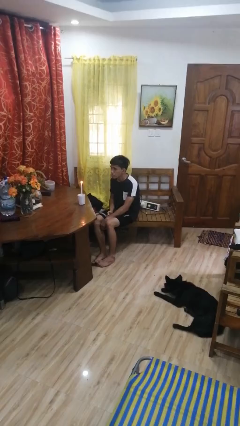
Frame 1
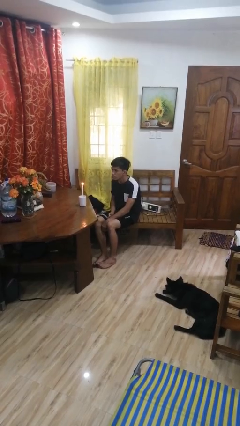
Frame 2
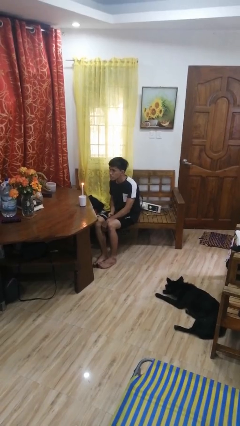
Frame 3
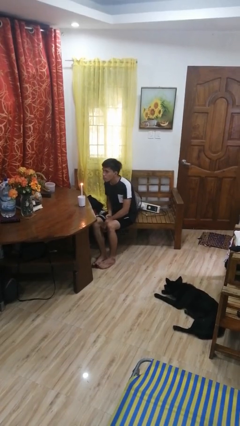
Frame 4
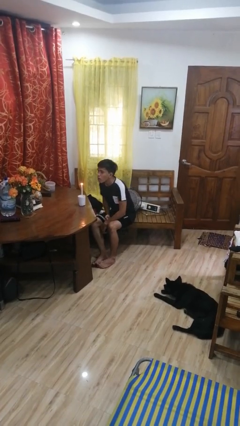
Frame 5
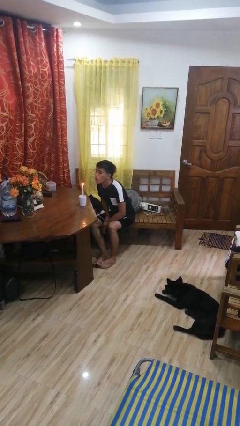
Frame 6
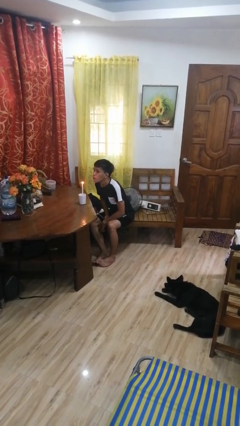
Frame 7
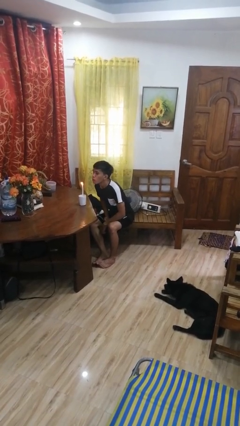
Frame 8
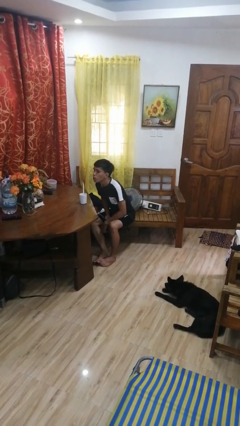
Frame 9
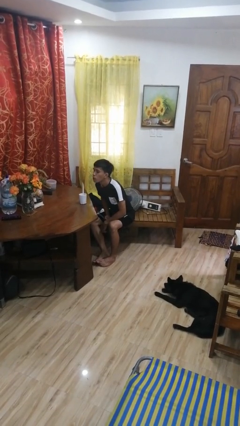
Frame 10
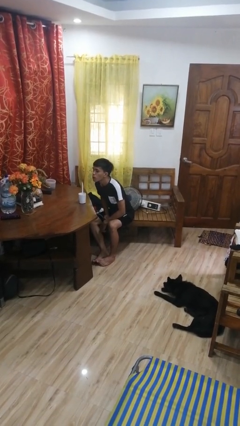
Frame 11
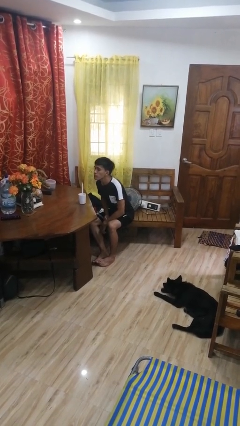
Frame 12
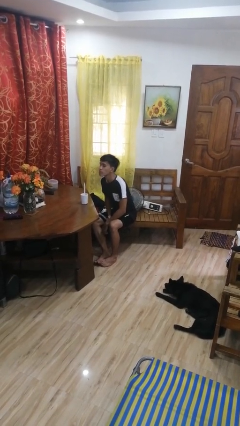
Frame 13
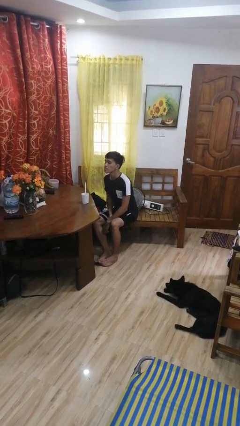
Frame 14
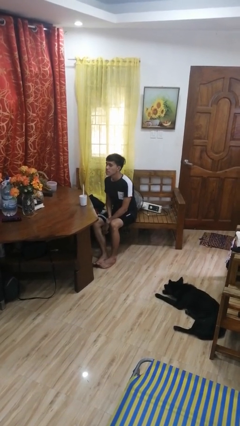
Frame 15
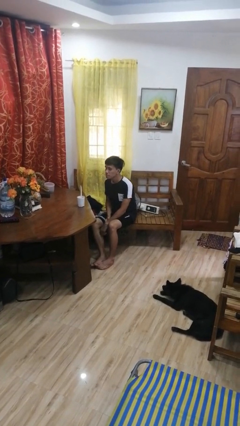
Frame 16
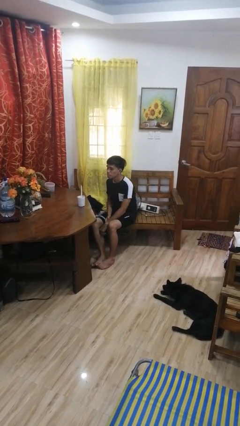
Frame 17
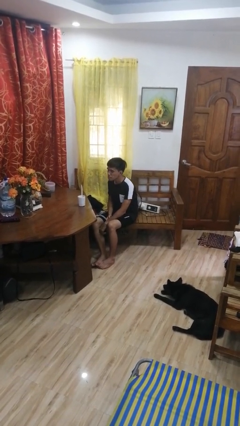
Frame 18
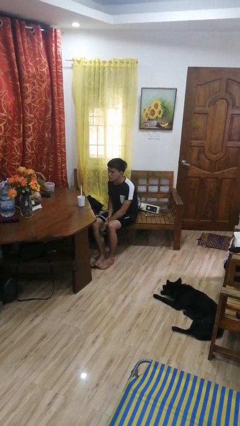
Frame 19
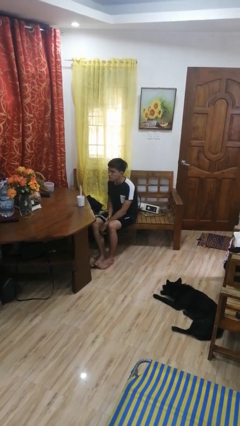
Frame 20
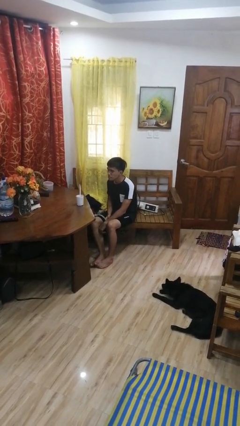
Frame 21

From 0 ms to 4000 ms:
person extinguishes candle

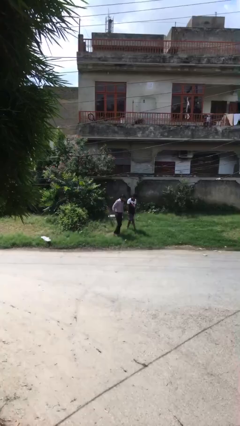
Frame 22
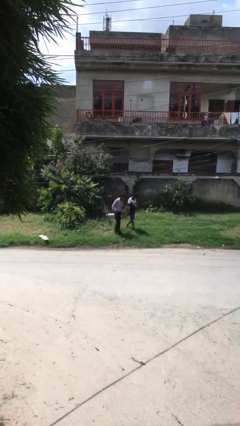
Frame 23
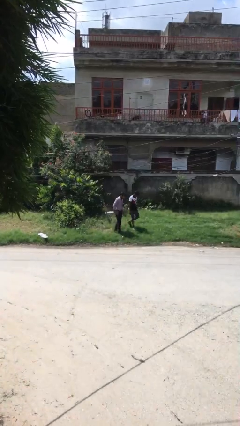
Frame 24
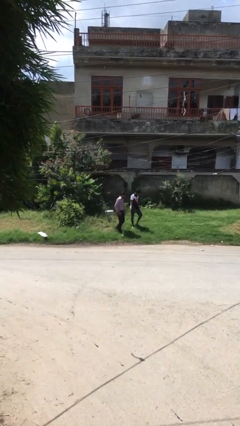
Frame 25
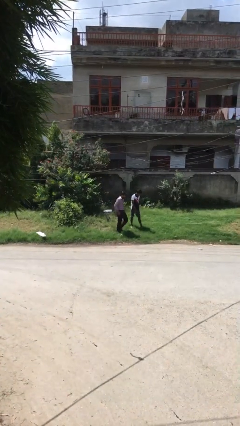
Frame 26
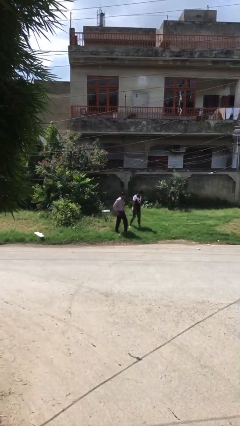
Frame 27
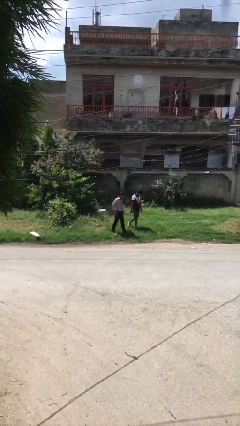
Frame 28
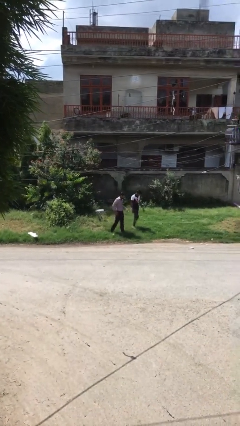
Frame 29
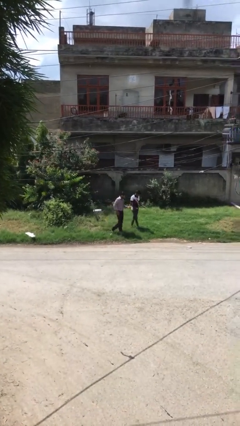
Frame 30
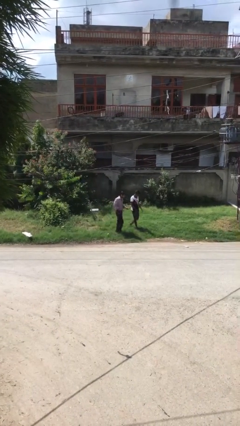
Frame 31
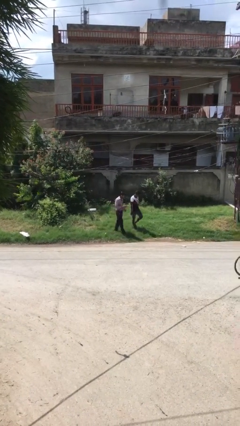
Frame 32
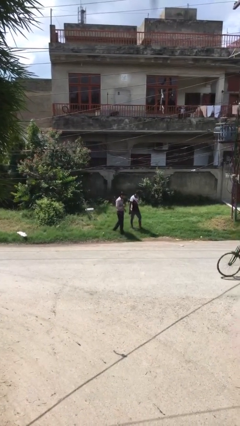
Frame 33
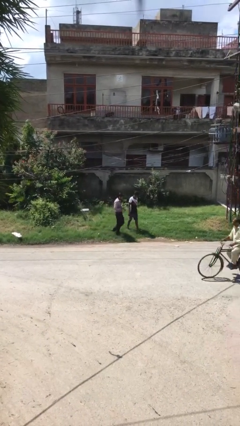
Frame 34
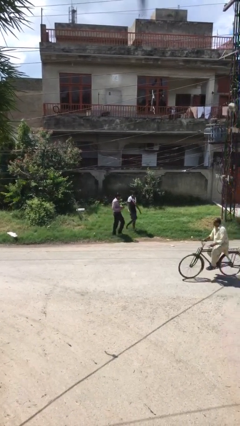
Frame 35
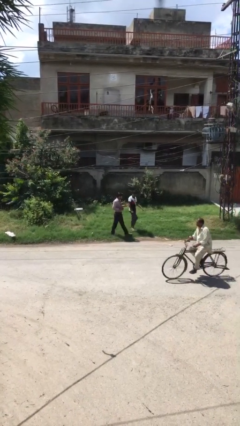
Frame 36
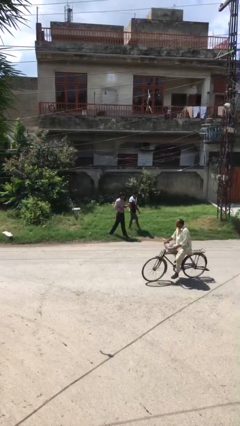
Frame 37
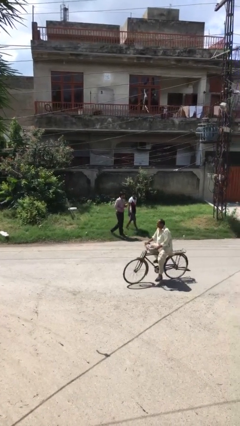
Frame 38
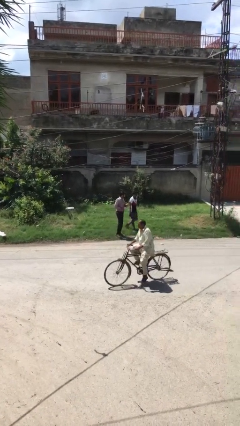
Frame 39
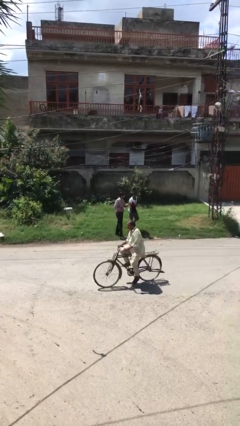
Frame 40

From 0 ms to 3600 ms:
person talks to person

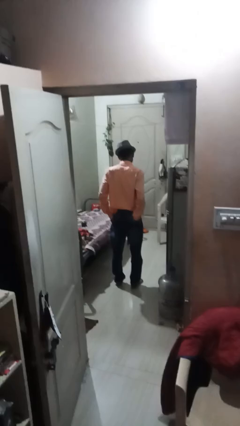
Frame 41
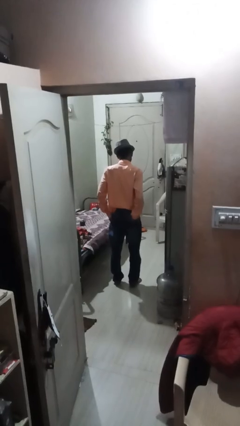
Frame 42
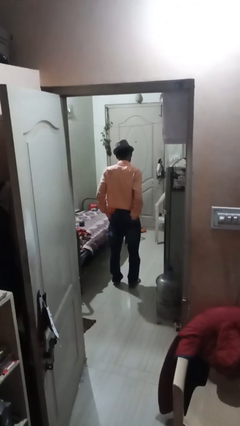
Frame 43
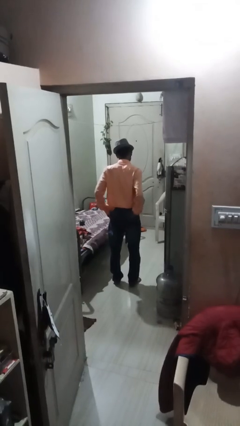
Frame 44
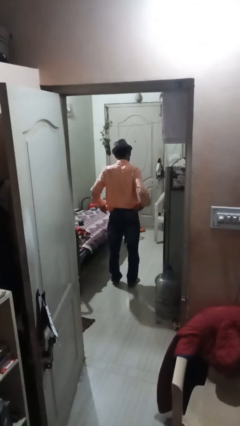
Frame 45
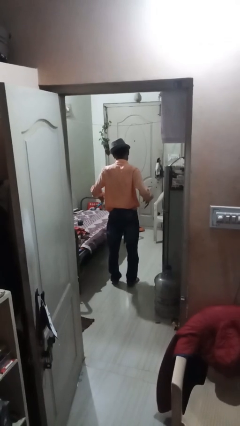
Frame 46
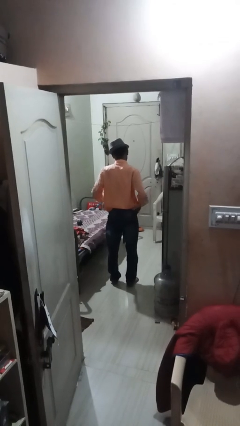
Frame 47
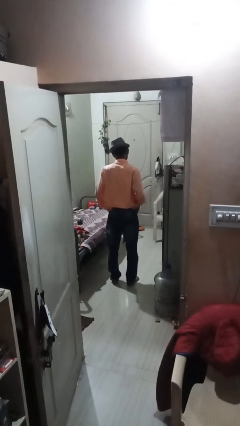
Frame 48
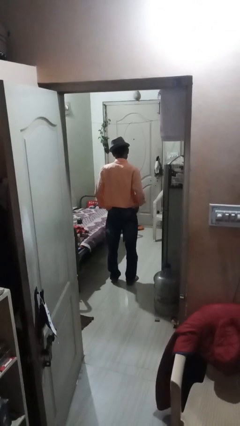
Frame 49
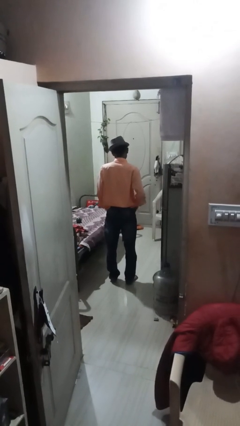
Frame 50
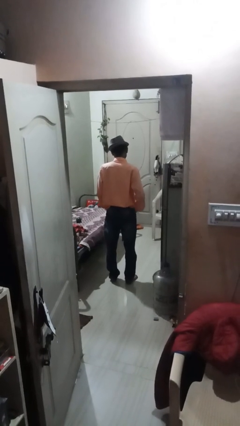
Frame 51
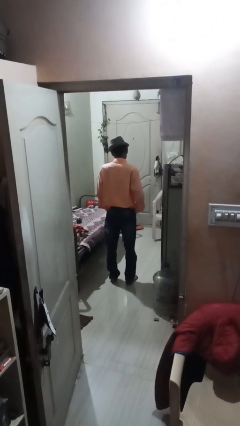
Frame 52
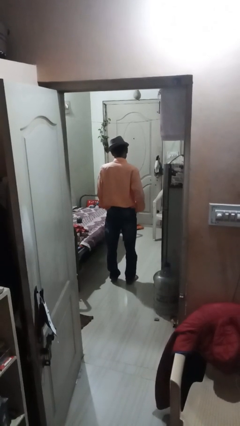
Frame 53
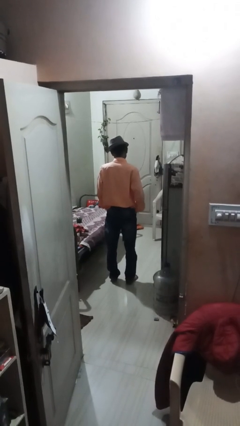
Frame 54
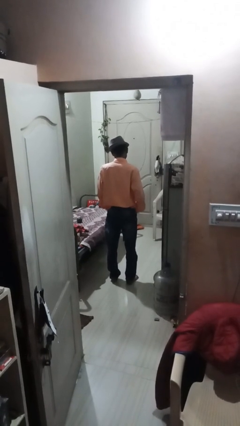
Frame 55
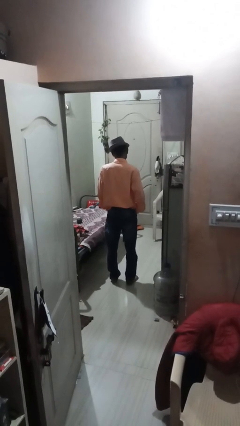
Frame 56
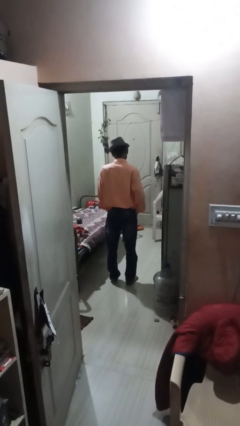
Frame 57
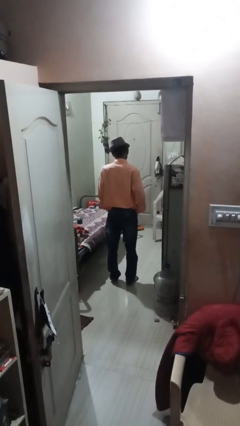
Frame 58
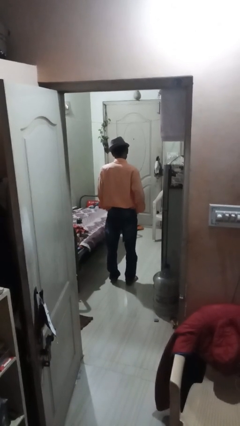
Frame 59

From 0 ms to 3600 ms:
person puts hands in back pockets

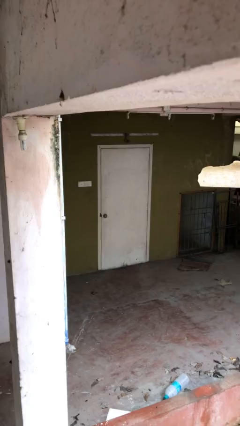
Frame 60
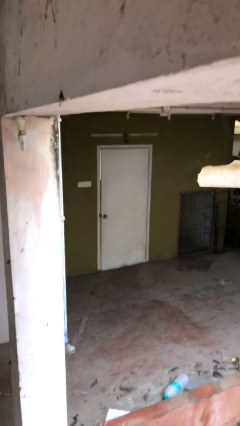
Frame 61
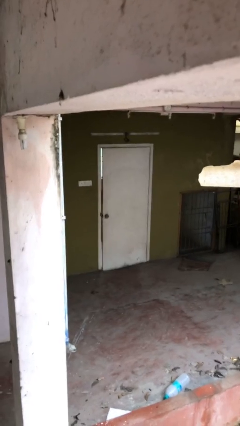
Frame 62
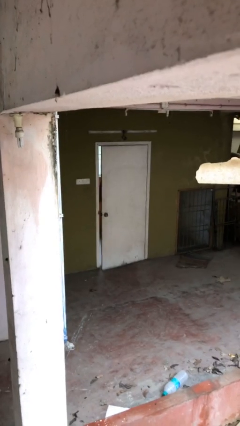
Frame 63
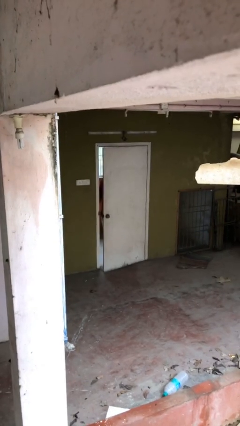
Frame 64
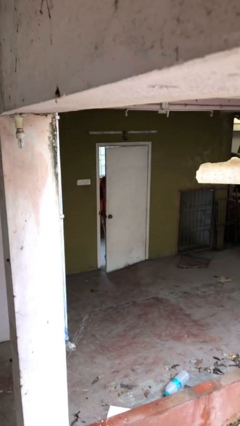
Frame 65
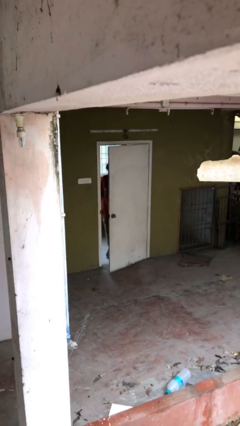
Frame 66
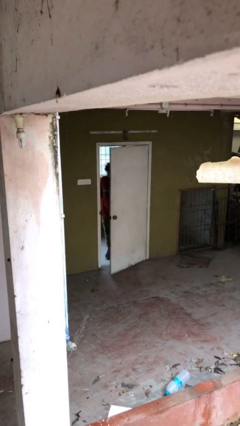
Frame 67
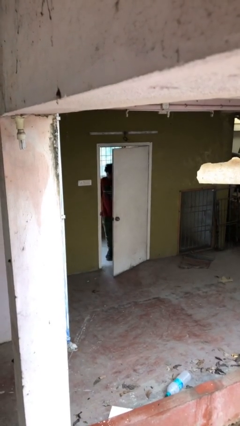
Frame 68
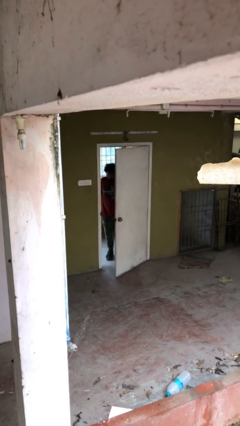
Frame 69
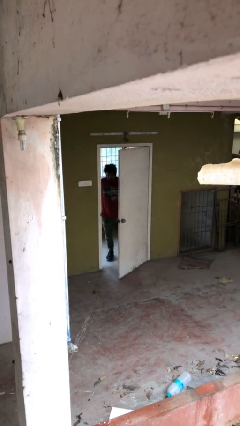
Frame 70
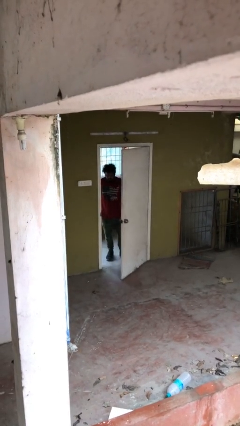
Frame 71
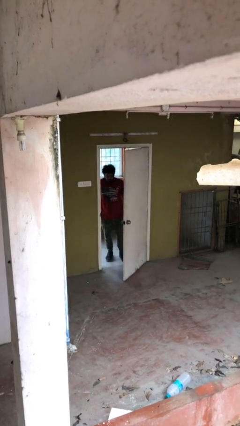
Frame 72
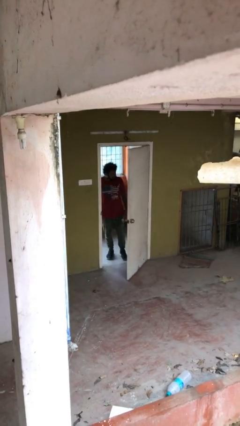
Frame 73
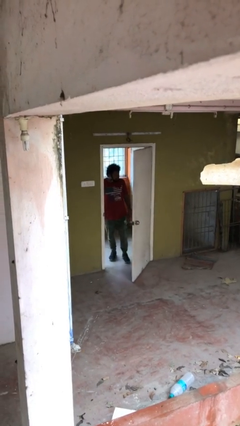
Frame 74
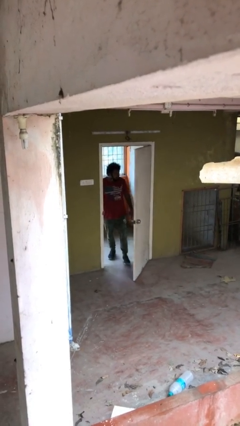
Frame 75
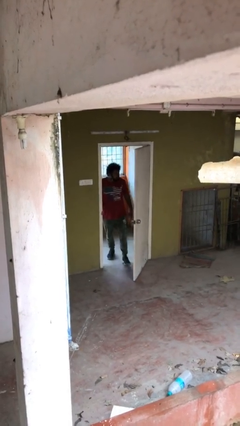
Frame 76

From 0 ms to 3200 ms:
person opens facility door

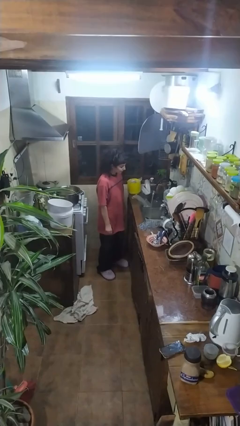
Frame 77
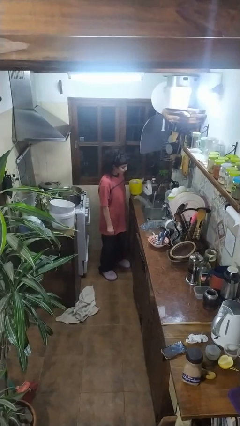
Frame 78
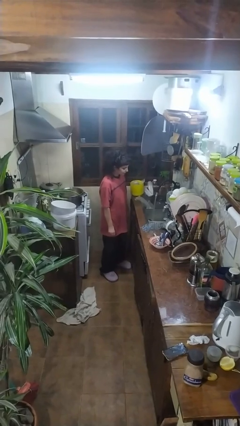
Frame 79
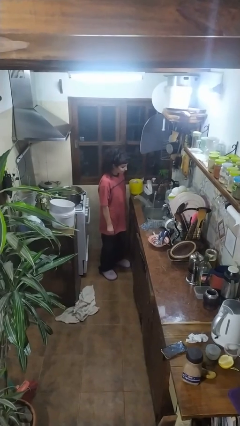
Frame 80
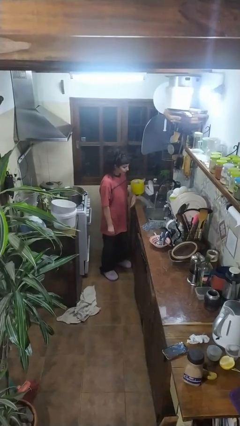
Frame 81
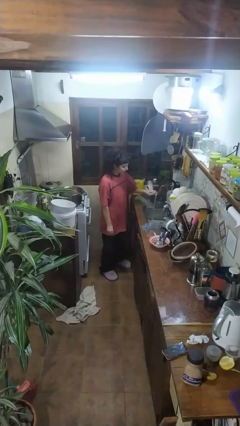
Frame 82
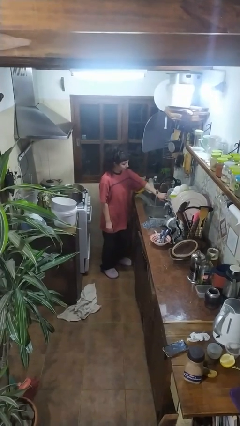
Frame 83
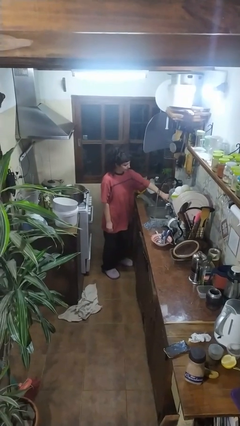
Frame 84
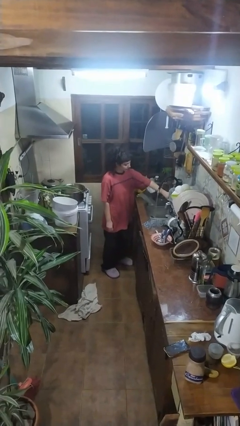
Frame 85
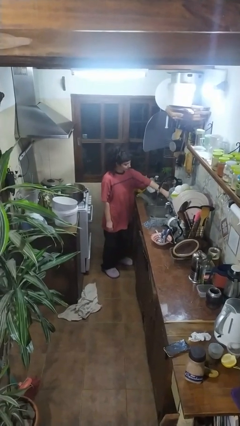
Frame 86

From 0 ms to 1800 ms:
person closes clothes washer

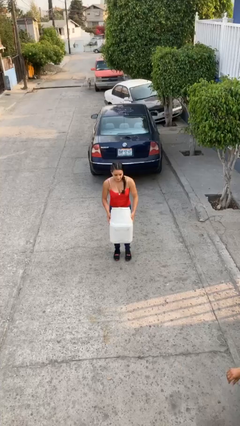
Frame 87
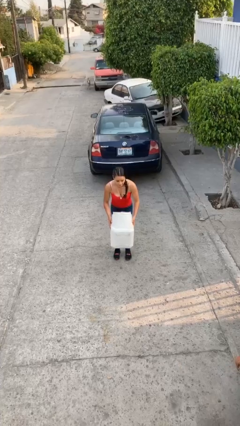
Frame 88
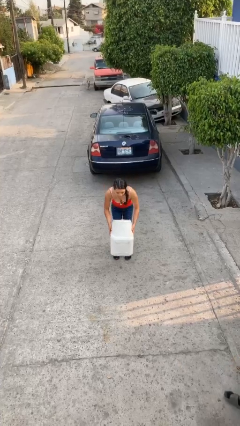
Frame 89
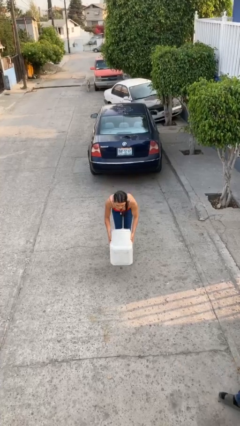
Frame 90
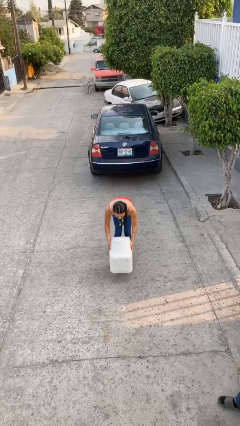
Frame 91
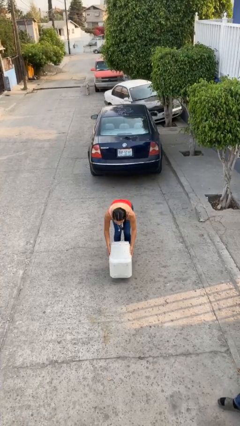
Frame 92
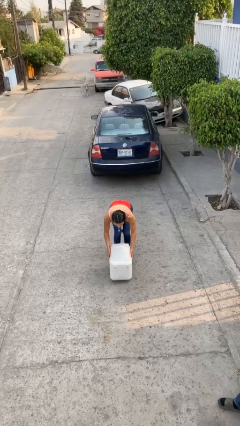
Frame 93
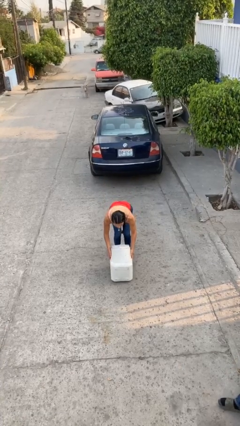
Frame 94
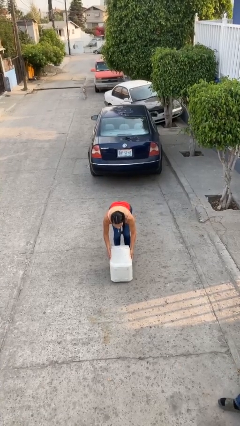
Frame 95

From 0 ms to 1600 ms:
person puts down object on floor
